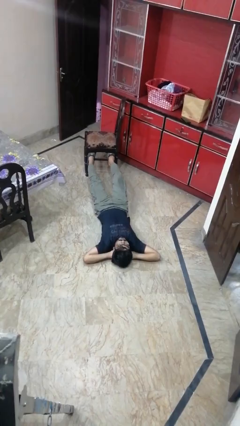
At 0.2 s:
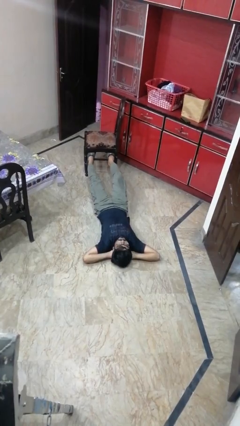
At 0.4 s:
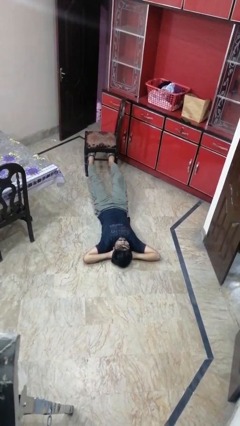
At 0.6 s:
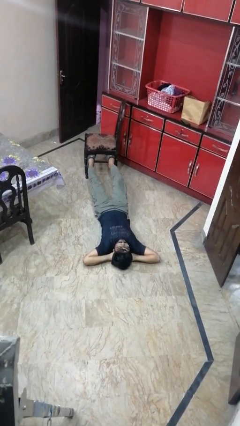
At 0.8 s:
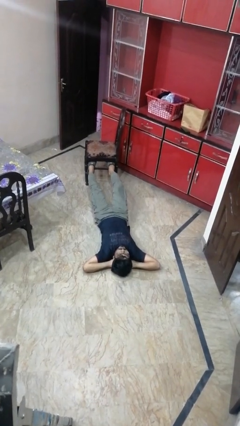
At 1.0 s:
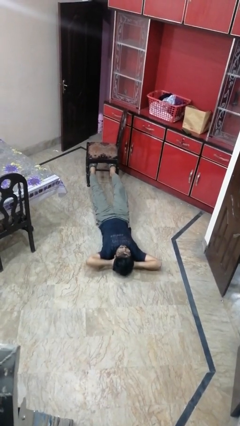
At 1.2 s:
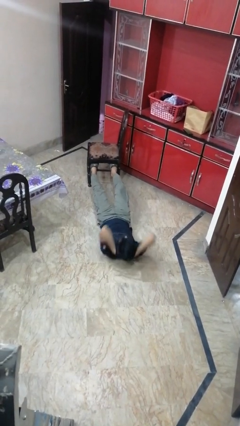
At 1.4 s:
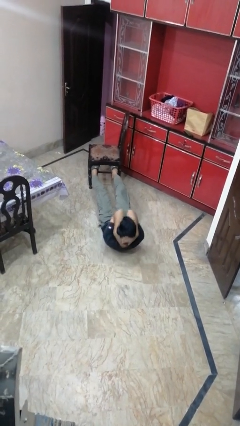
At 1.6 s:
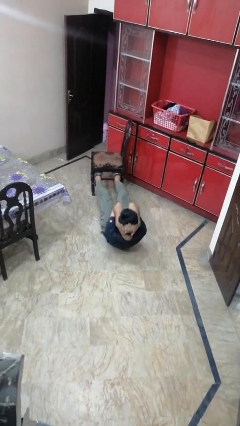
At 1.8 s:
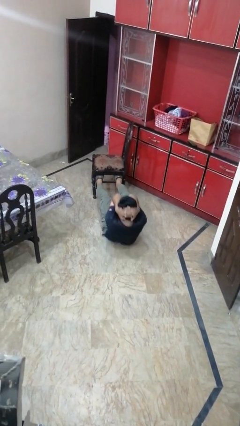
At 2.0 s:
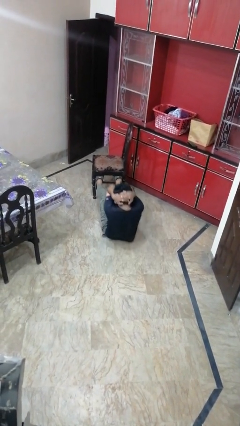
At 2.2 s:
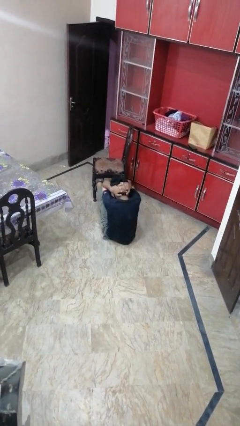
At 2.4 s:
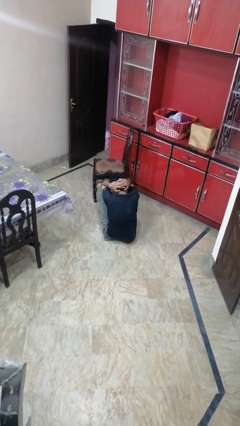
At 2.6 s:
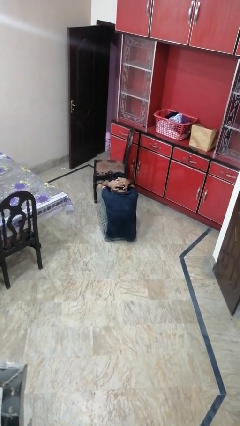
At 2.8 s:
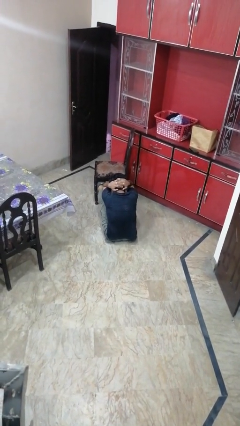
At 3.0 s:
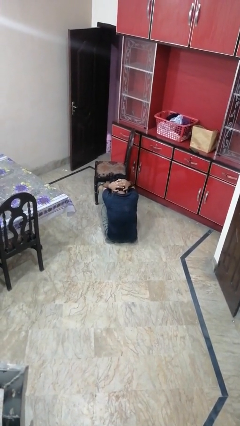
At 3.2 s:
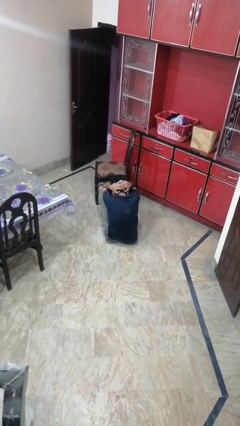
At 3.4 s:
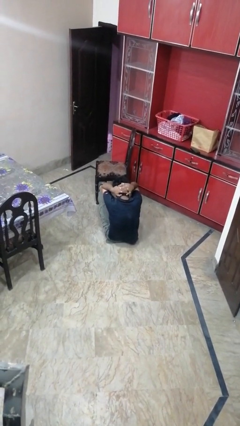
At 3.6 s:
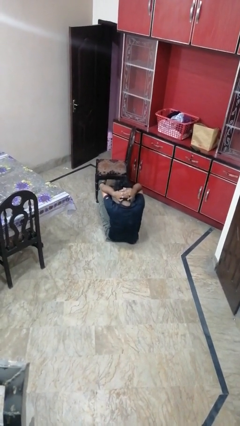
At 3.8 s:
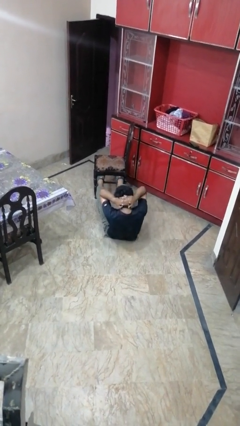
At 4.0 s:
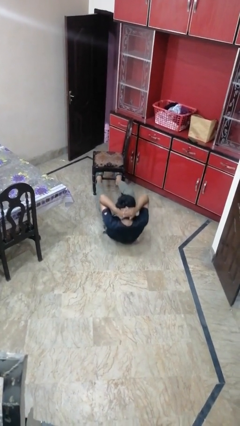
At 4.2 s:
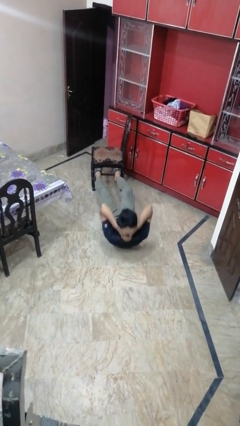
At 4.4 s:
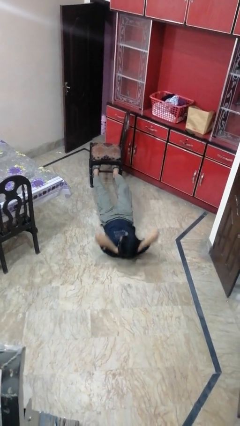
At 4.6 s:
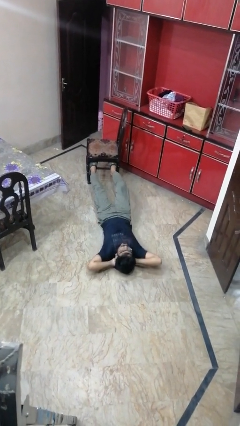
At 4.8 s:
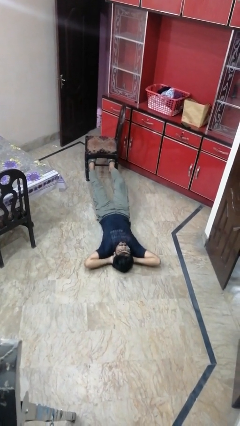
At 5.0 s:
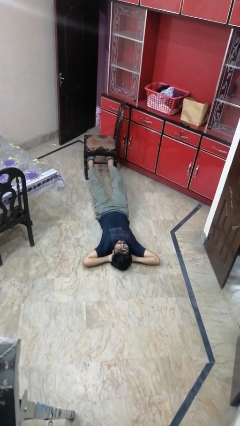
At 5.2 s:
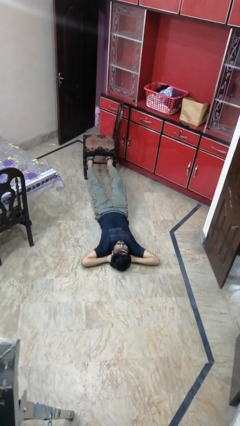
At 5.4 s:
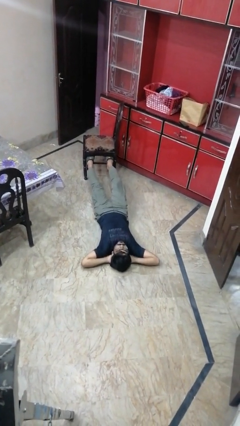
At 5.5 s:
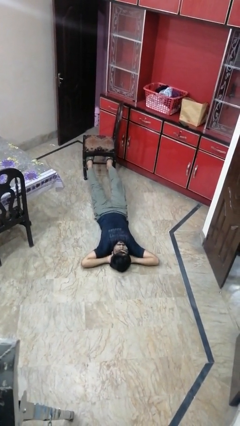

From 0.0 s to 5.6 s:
person exercises with situp

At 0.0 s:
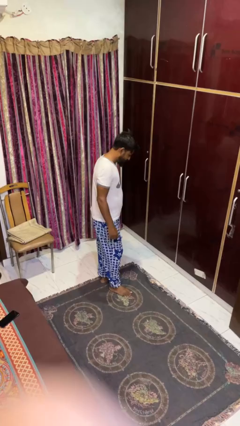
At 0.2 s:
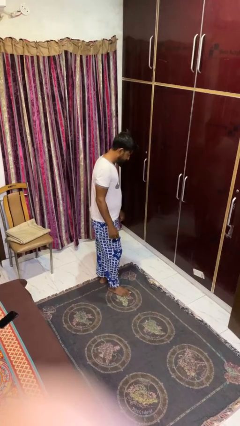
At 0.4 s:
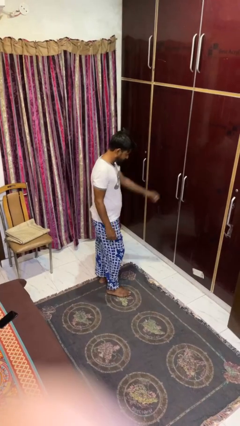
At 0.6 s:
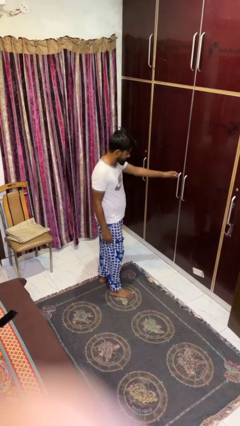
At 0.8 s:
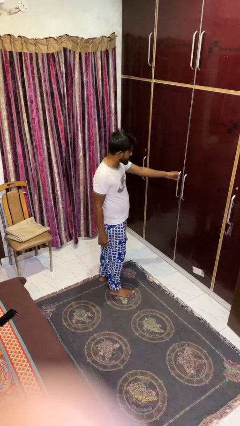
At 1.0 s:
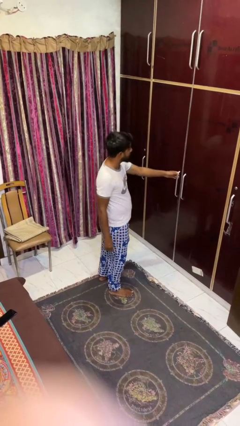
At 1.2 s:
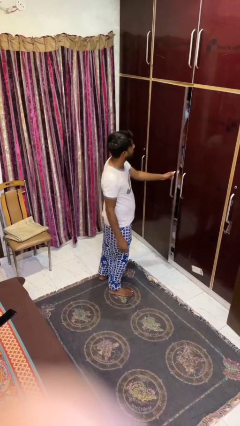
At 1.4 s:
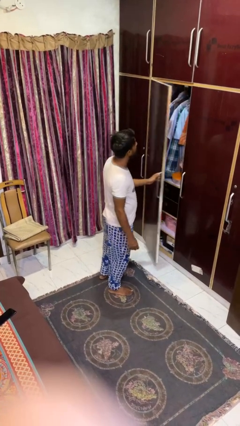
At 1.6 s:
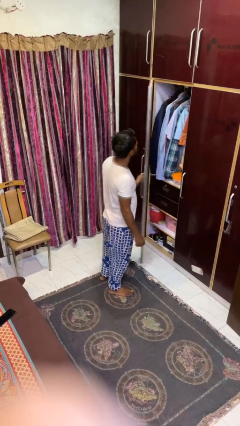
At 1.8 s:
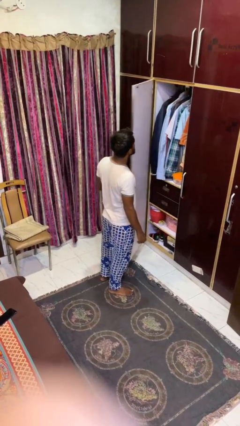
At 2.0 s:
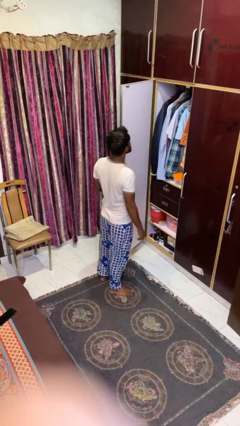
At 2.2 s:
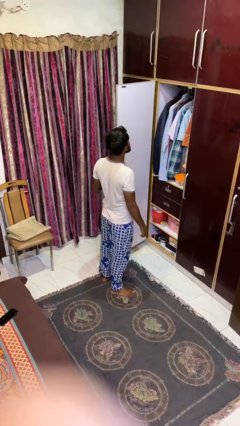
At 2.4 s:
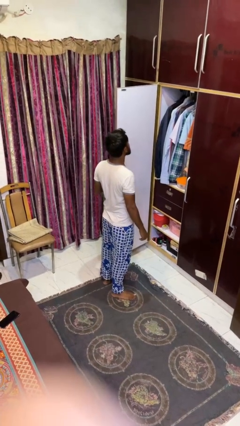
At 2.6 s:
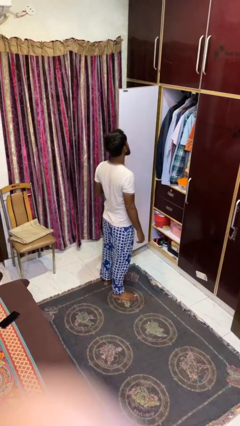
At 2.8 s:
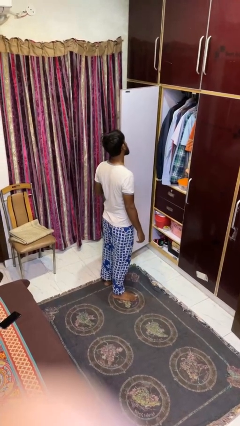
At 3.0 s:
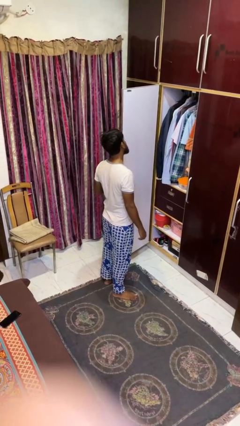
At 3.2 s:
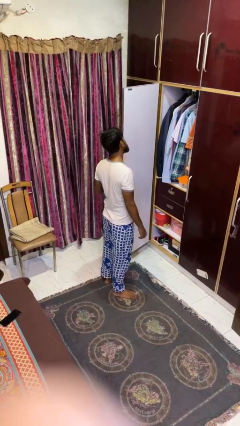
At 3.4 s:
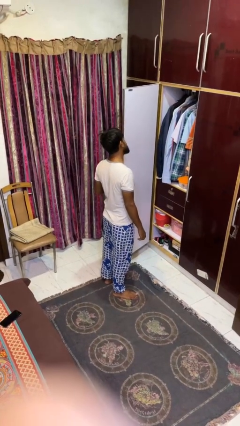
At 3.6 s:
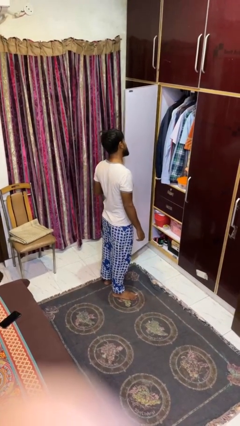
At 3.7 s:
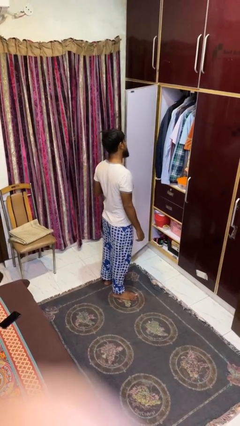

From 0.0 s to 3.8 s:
person opens closet door

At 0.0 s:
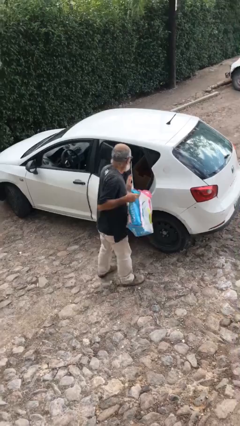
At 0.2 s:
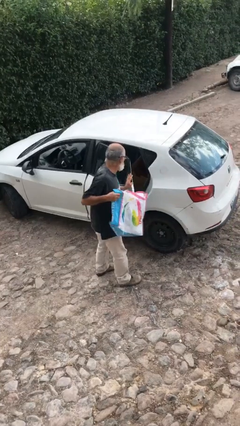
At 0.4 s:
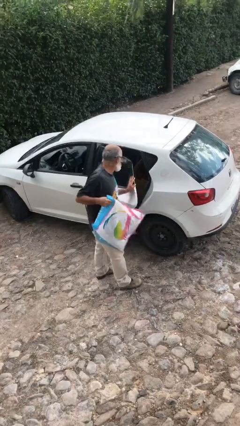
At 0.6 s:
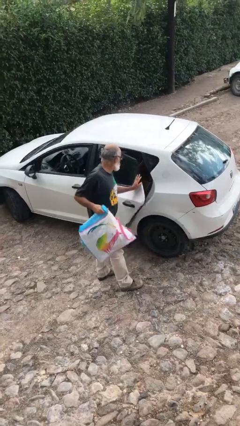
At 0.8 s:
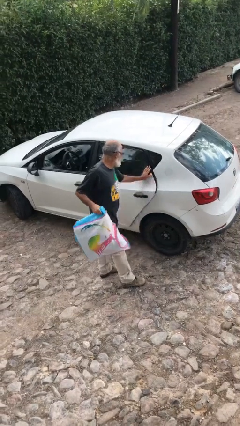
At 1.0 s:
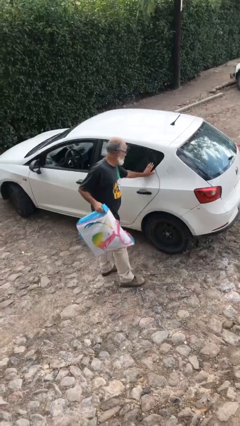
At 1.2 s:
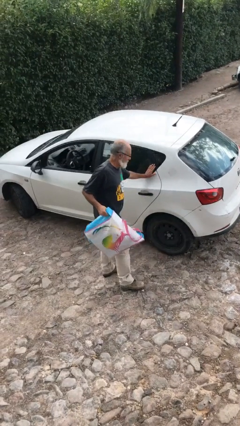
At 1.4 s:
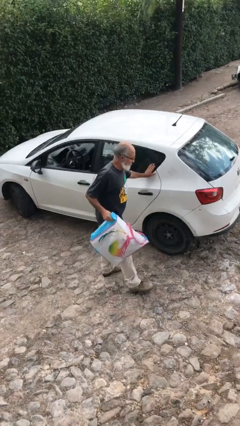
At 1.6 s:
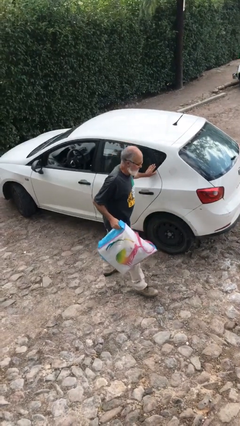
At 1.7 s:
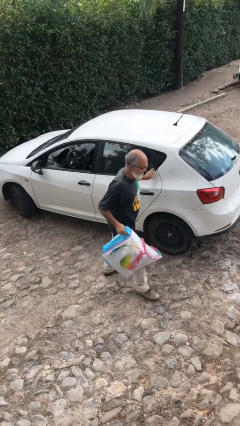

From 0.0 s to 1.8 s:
person closes car door

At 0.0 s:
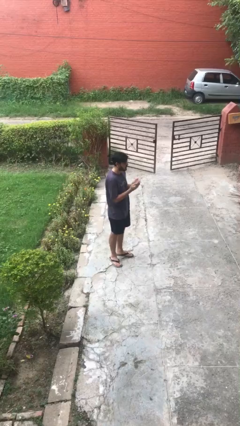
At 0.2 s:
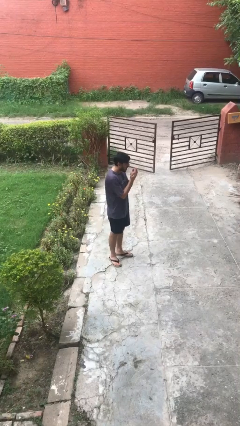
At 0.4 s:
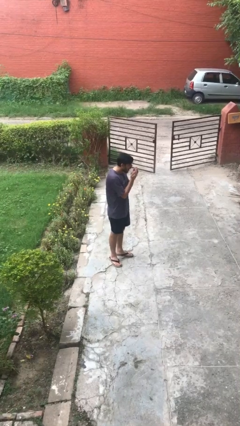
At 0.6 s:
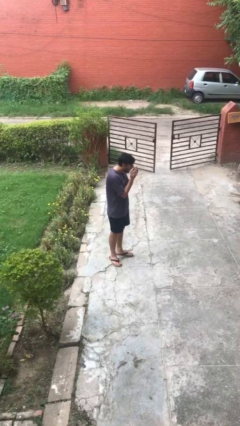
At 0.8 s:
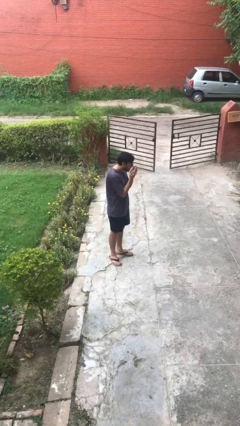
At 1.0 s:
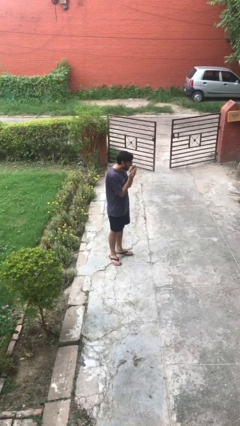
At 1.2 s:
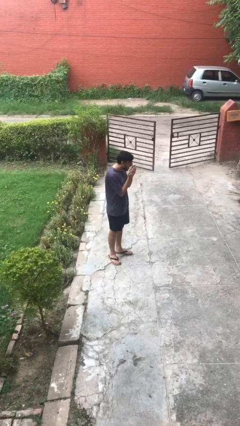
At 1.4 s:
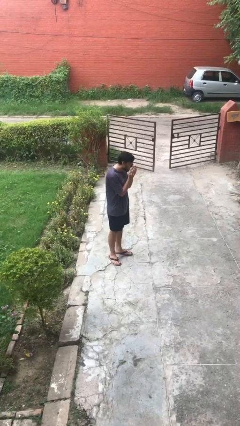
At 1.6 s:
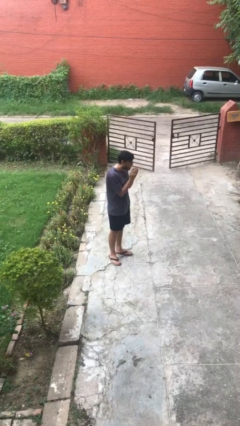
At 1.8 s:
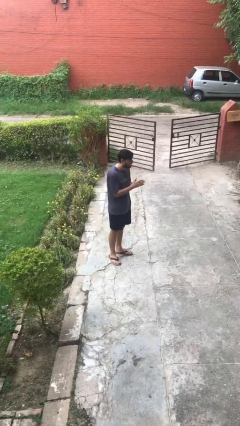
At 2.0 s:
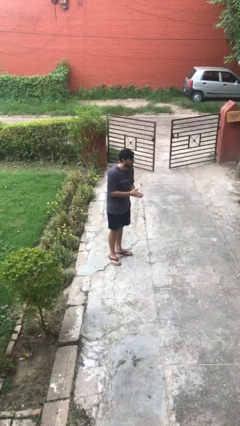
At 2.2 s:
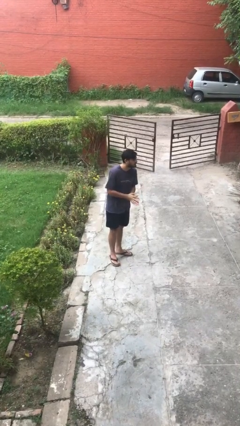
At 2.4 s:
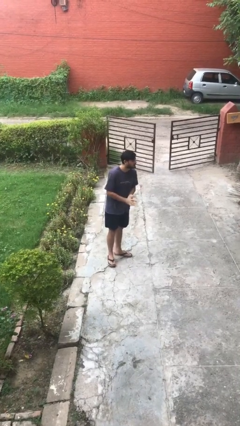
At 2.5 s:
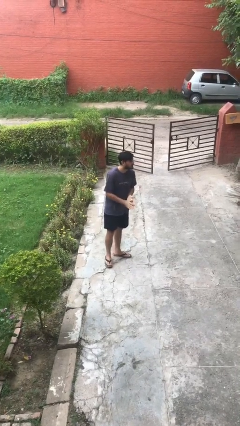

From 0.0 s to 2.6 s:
person blows into hands

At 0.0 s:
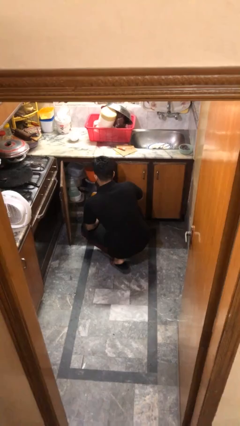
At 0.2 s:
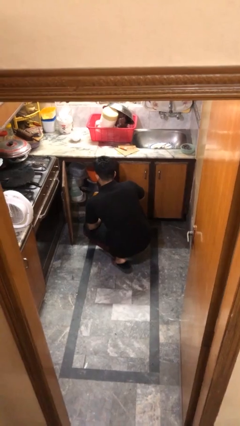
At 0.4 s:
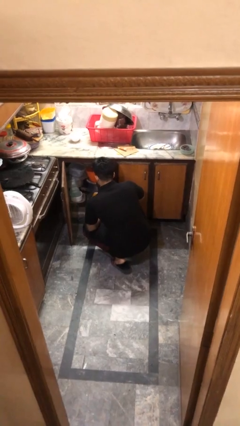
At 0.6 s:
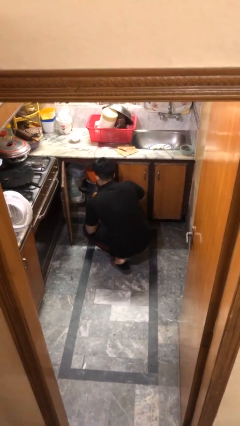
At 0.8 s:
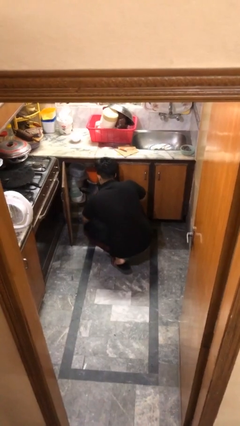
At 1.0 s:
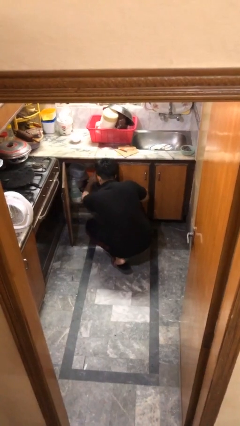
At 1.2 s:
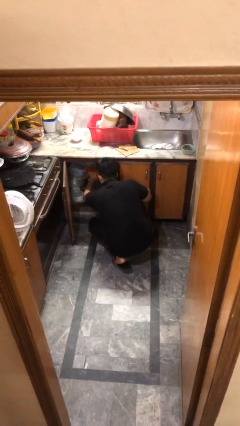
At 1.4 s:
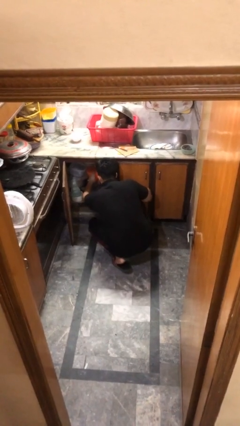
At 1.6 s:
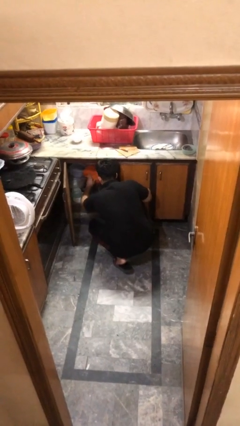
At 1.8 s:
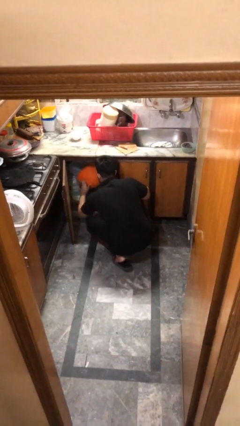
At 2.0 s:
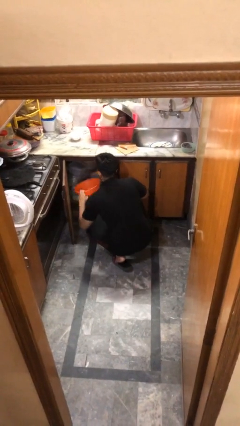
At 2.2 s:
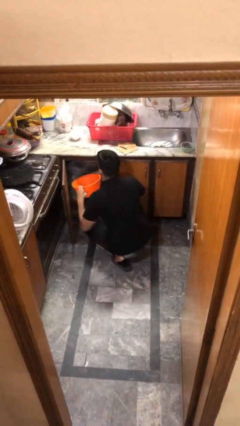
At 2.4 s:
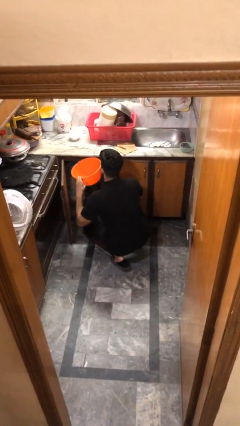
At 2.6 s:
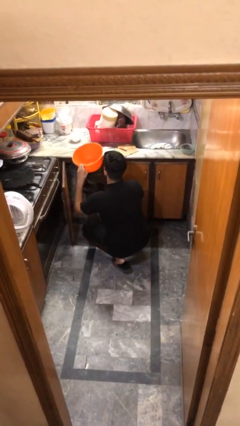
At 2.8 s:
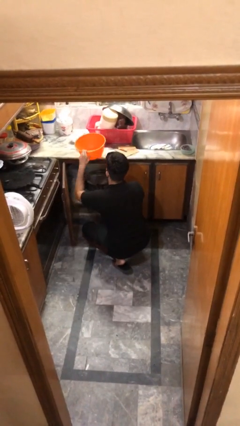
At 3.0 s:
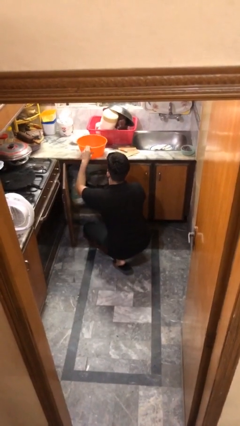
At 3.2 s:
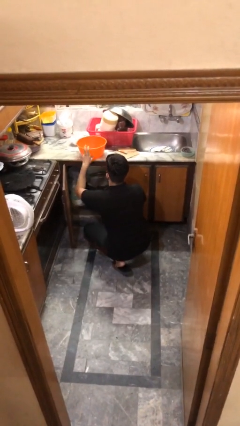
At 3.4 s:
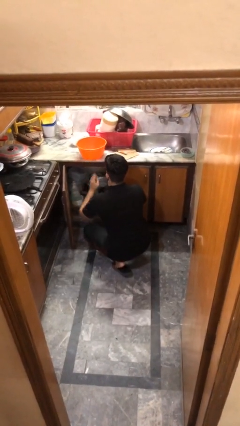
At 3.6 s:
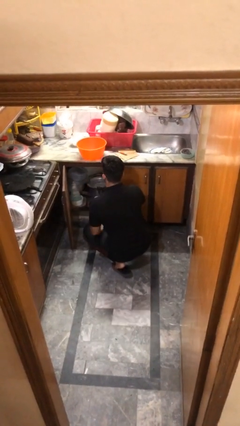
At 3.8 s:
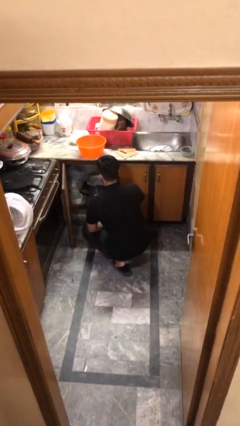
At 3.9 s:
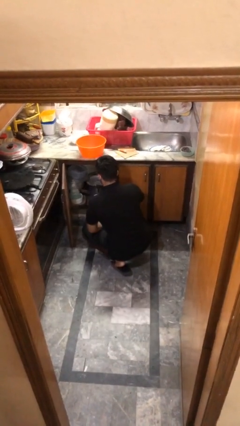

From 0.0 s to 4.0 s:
person takes object from kitchen drawer
